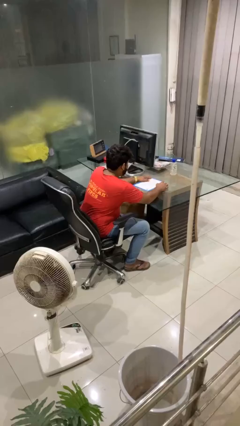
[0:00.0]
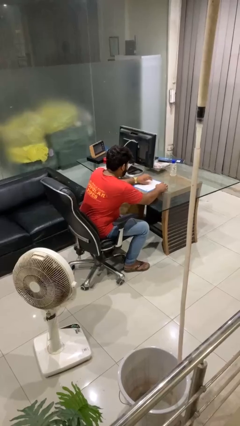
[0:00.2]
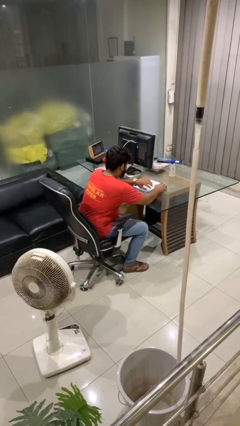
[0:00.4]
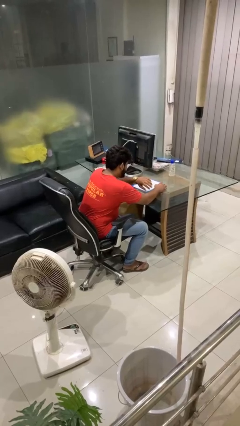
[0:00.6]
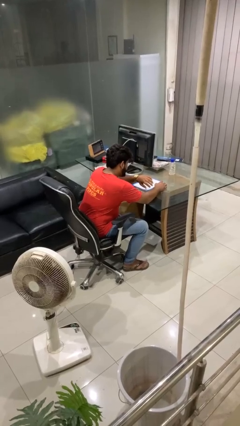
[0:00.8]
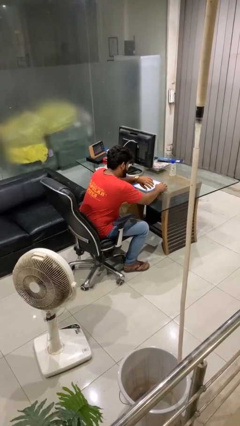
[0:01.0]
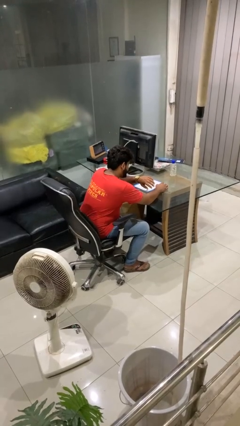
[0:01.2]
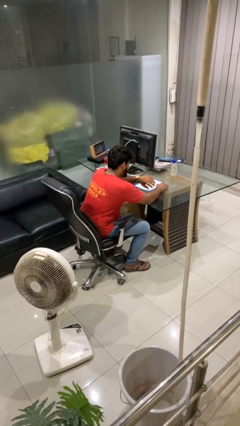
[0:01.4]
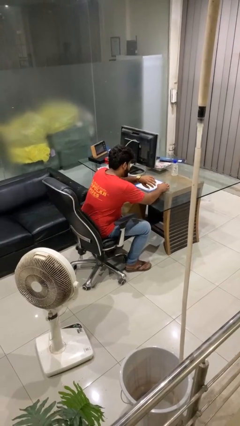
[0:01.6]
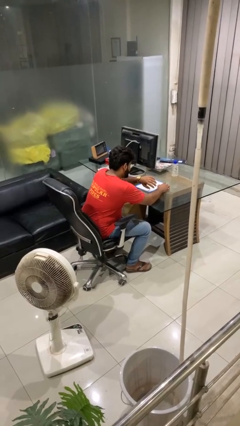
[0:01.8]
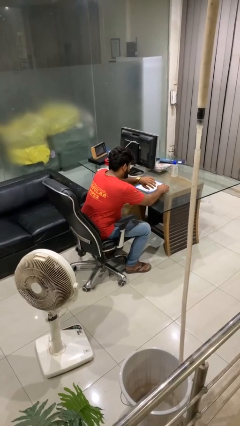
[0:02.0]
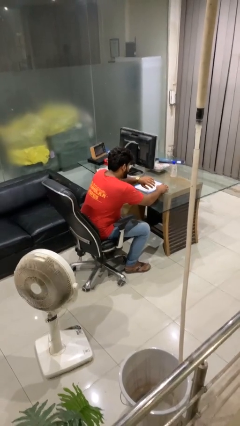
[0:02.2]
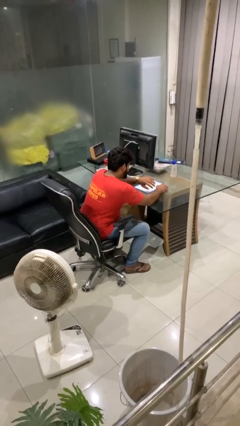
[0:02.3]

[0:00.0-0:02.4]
person looks at wristwatch

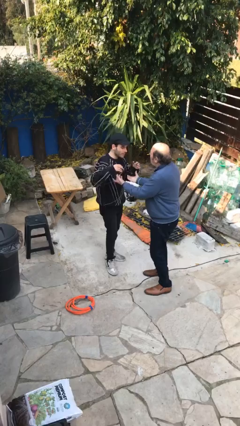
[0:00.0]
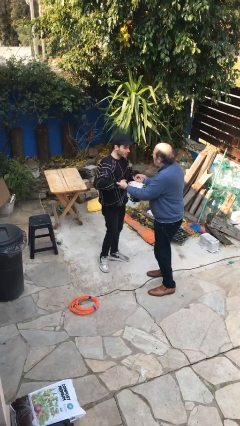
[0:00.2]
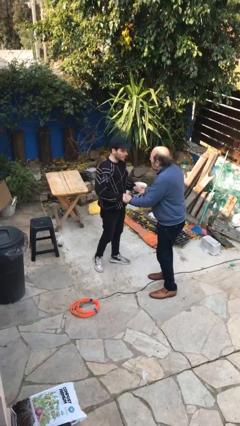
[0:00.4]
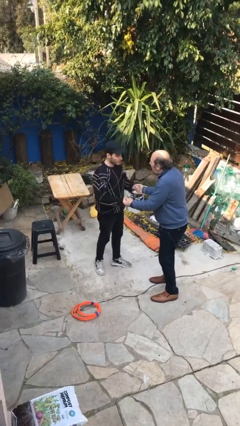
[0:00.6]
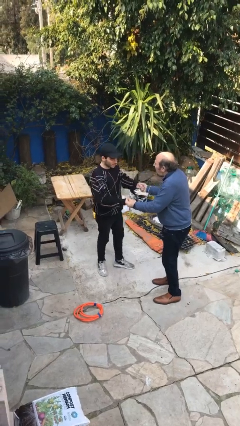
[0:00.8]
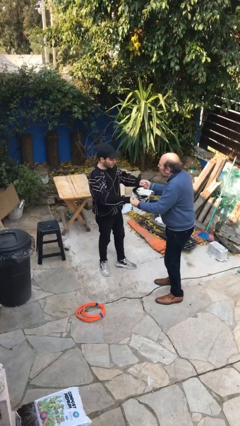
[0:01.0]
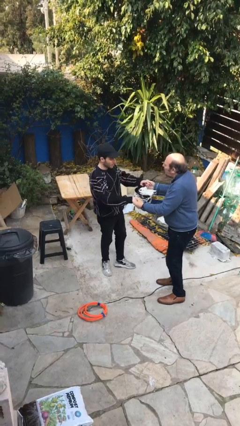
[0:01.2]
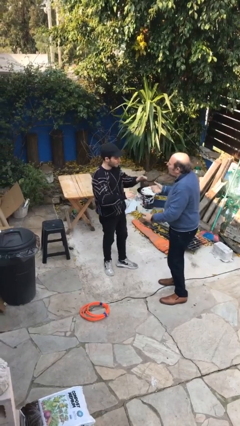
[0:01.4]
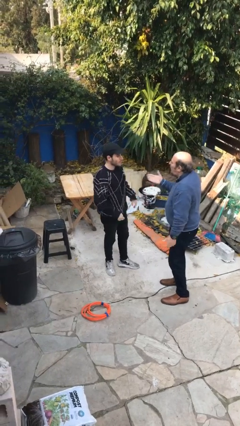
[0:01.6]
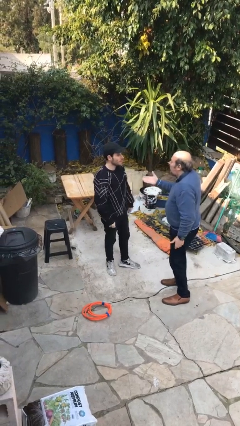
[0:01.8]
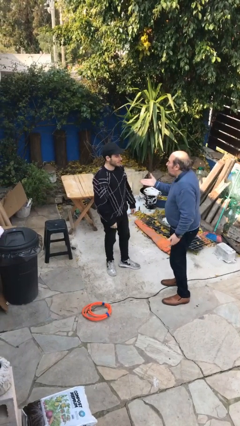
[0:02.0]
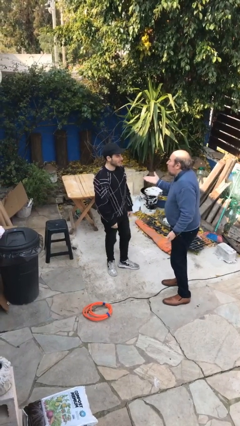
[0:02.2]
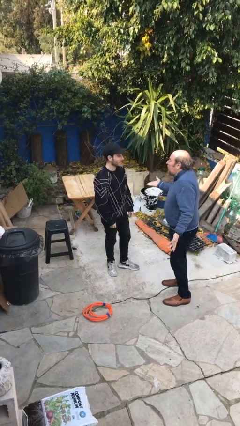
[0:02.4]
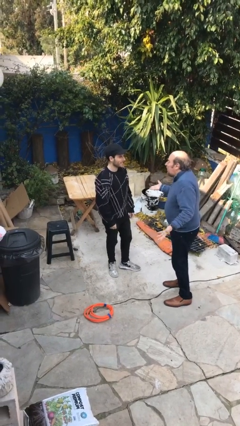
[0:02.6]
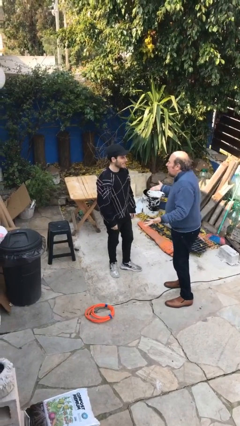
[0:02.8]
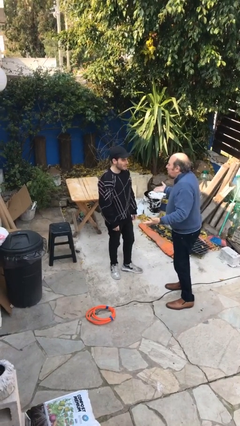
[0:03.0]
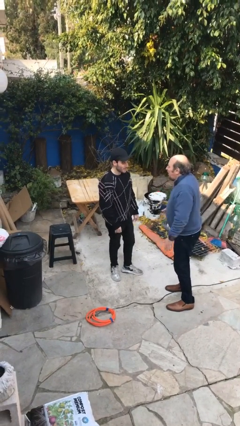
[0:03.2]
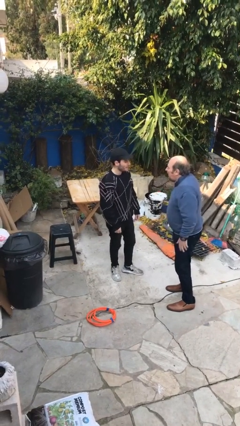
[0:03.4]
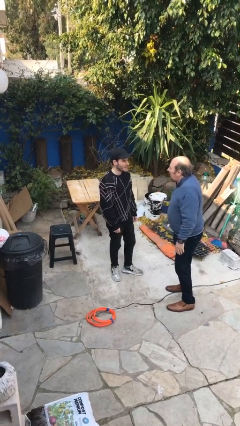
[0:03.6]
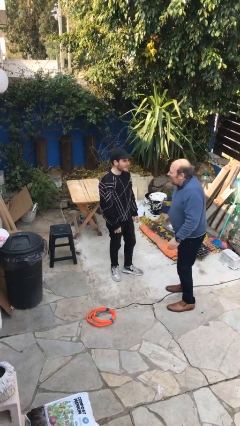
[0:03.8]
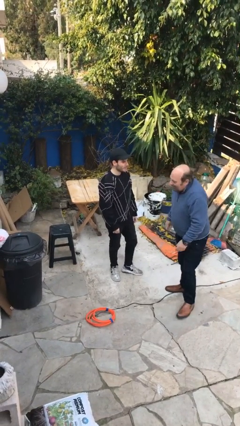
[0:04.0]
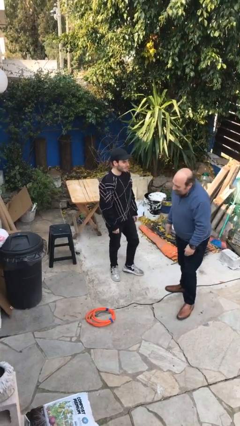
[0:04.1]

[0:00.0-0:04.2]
person talks to person

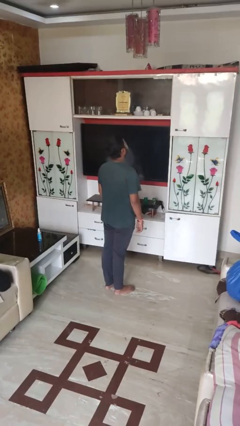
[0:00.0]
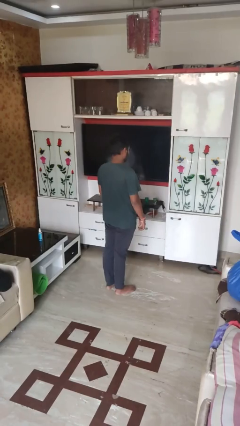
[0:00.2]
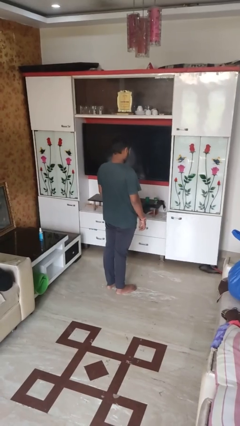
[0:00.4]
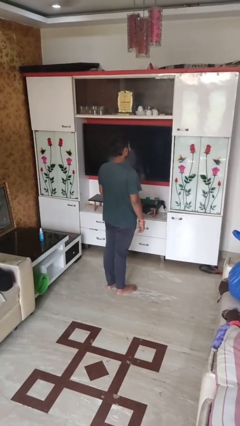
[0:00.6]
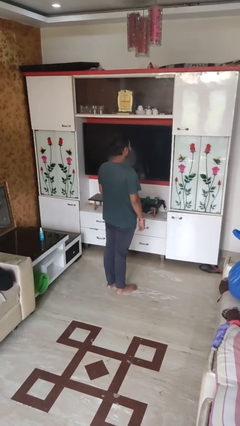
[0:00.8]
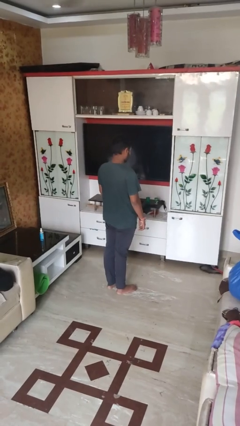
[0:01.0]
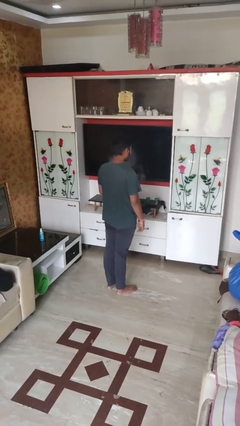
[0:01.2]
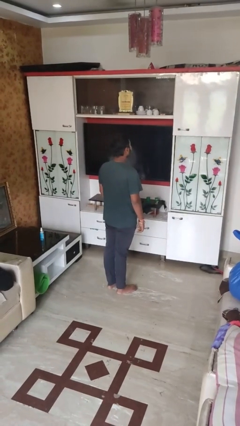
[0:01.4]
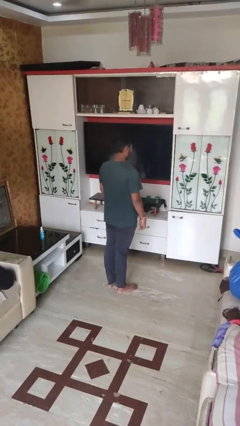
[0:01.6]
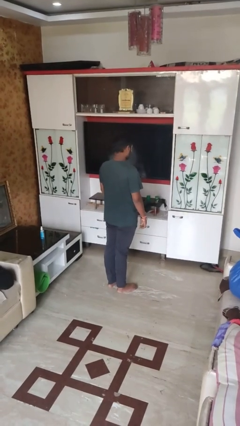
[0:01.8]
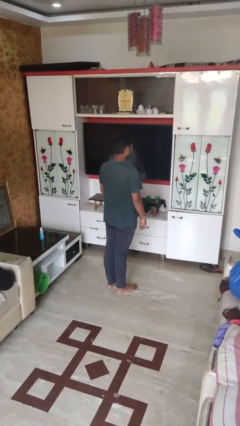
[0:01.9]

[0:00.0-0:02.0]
person nods head

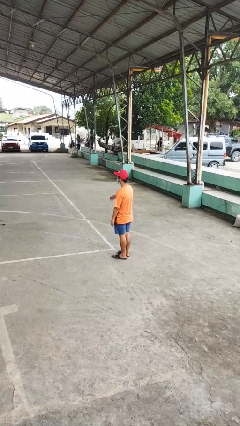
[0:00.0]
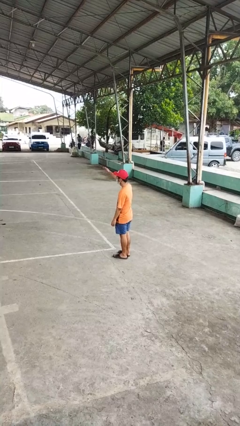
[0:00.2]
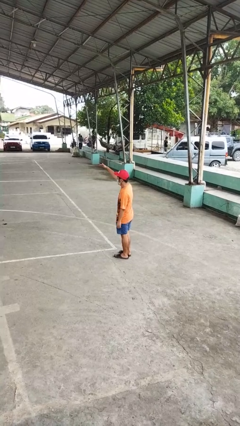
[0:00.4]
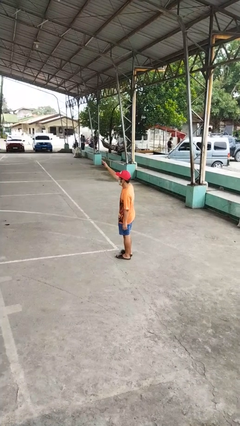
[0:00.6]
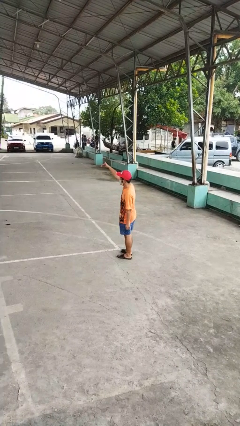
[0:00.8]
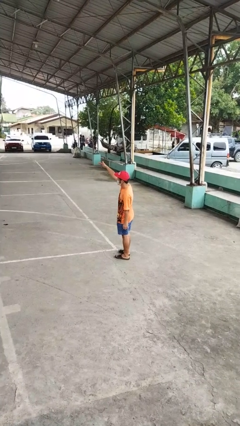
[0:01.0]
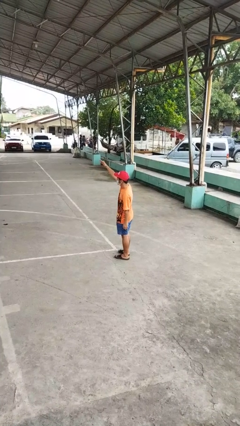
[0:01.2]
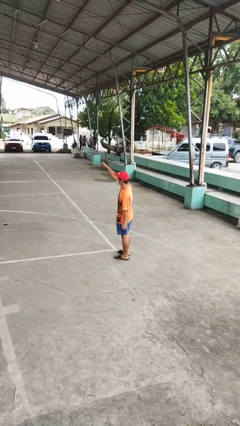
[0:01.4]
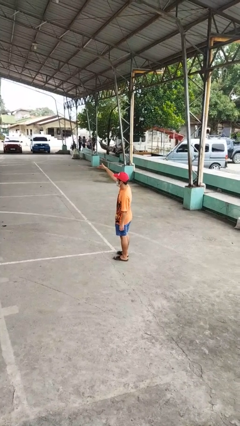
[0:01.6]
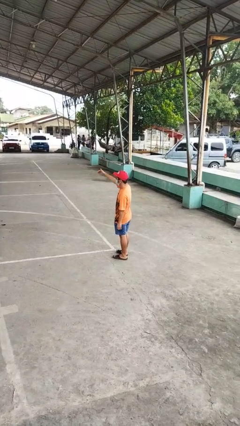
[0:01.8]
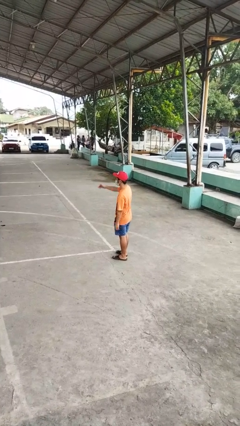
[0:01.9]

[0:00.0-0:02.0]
person gestures come here

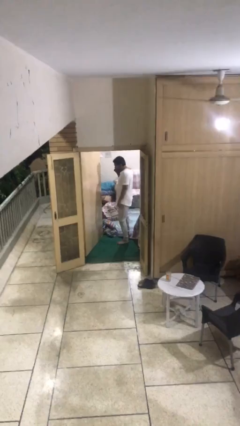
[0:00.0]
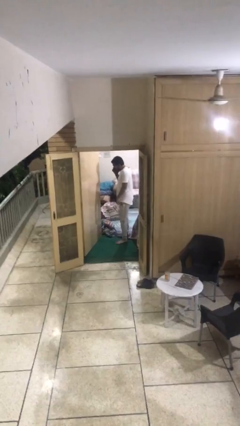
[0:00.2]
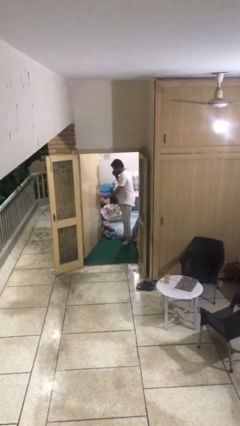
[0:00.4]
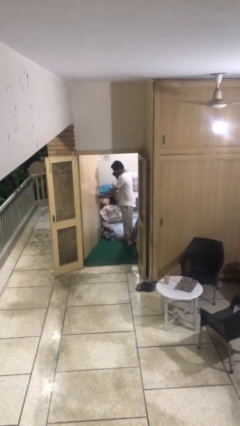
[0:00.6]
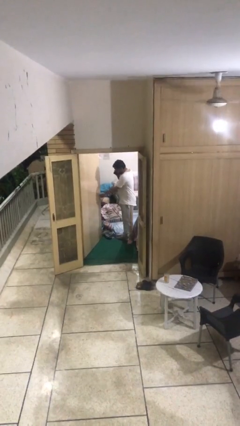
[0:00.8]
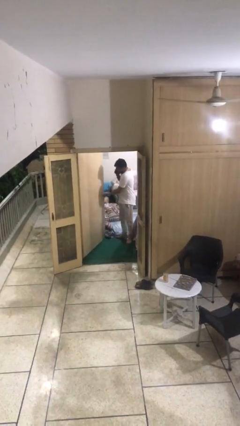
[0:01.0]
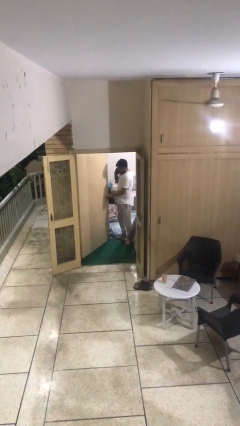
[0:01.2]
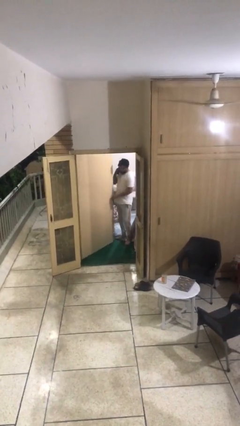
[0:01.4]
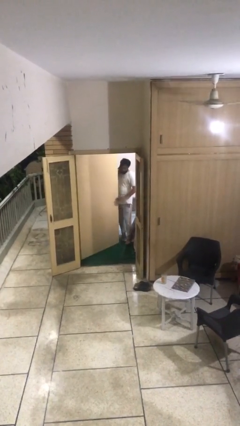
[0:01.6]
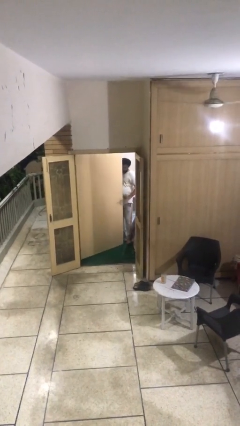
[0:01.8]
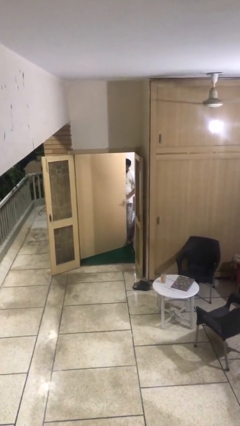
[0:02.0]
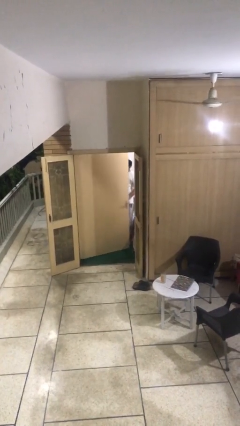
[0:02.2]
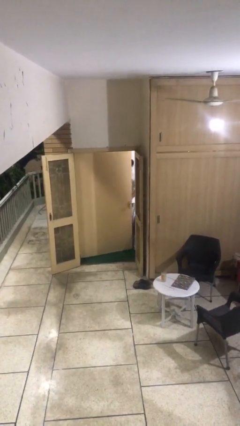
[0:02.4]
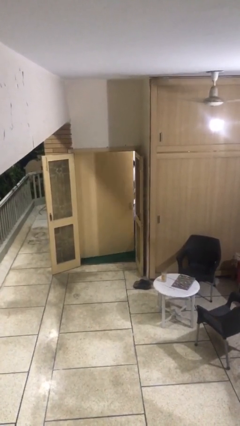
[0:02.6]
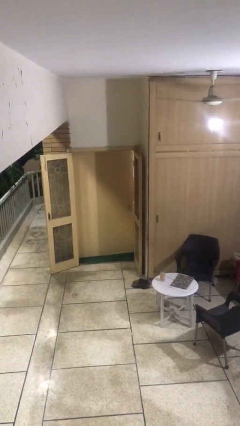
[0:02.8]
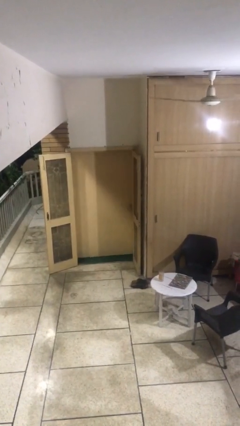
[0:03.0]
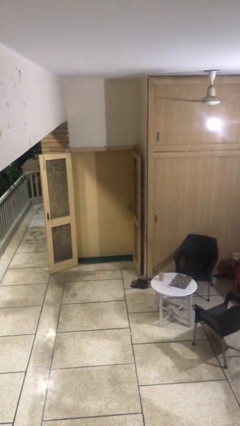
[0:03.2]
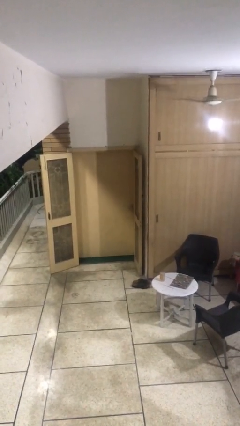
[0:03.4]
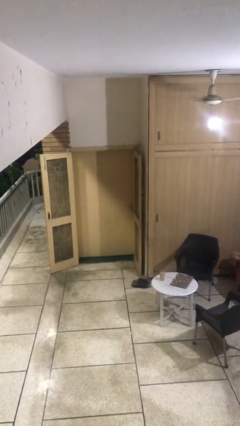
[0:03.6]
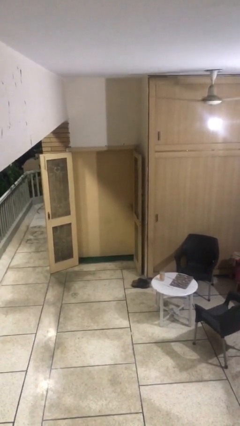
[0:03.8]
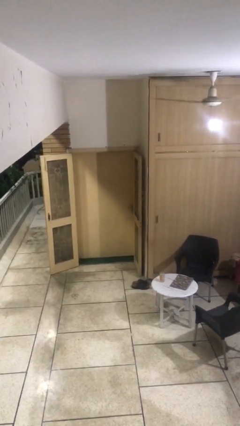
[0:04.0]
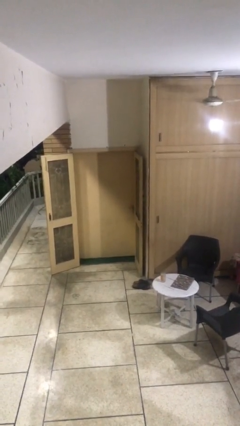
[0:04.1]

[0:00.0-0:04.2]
person closes facility door

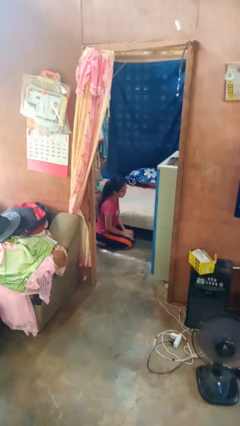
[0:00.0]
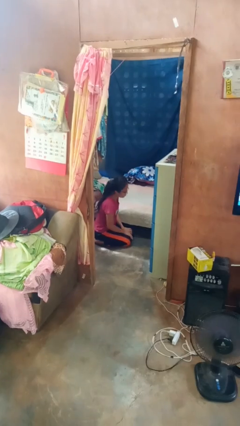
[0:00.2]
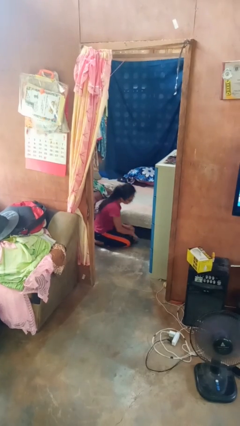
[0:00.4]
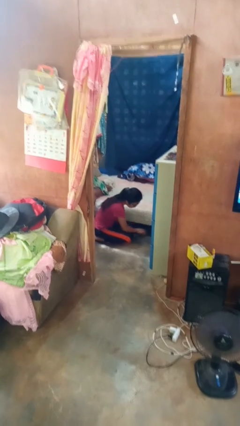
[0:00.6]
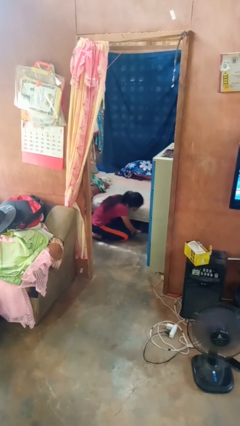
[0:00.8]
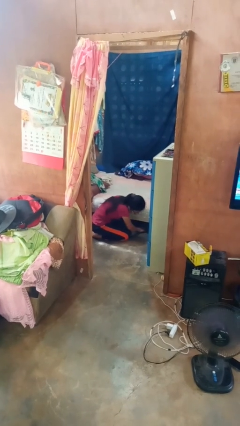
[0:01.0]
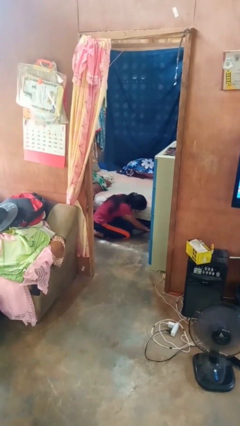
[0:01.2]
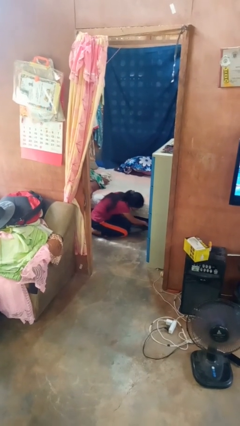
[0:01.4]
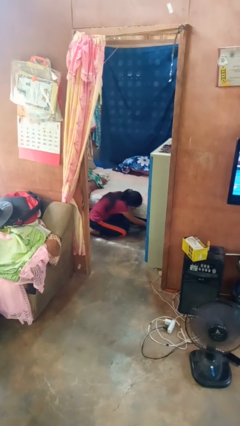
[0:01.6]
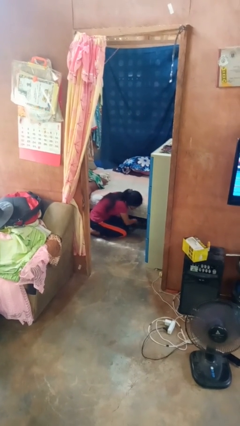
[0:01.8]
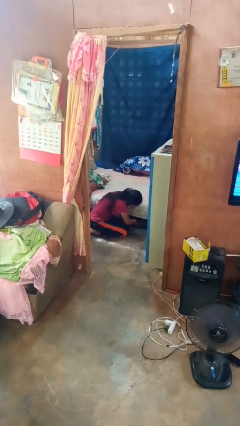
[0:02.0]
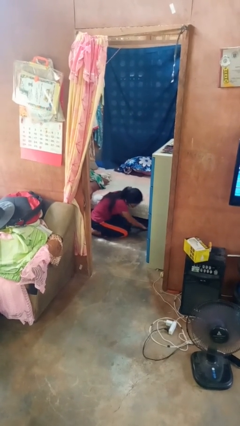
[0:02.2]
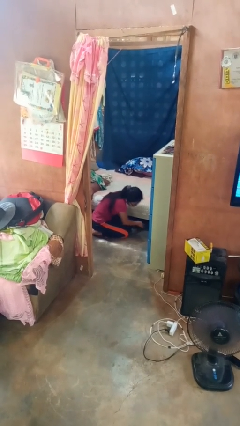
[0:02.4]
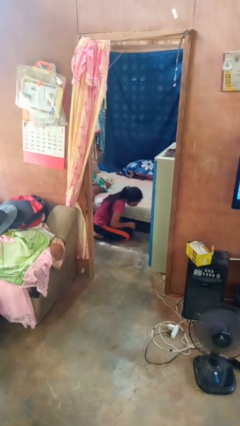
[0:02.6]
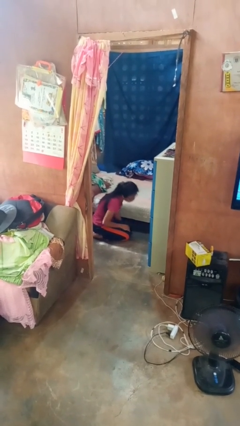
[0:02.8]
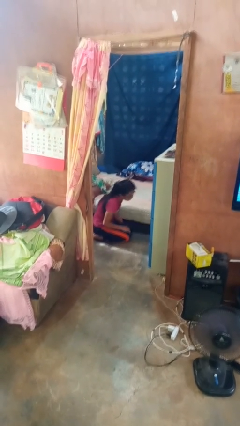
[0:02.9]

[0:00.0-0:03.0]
person searches under bed
